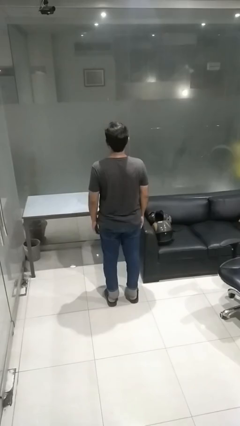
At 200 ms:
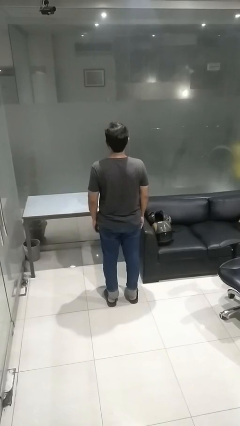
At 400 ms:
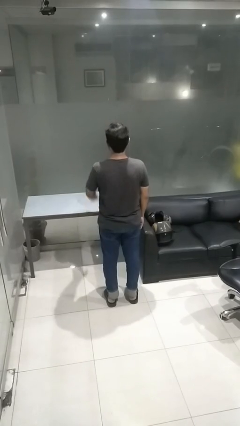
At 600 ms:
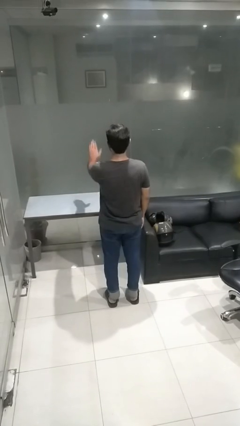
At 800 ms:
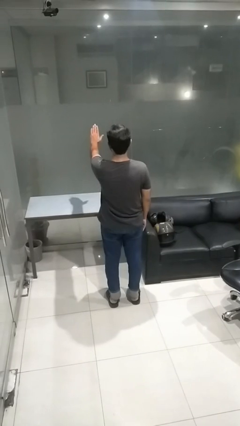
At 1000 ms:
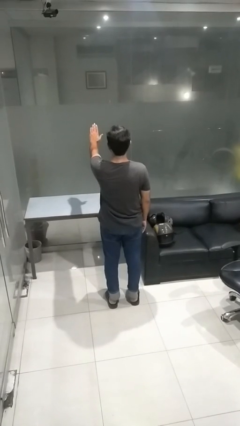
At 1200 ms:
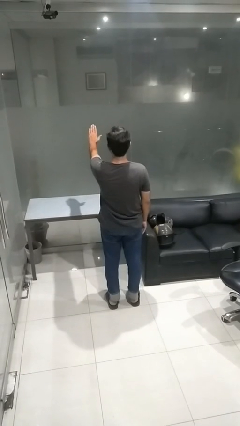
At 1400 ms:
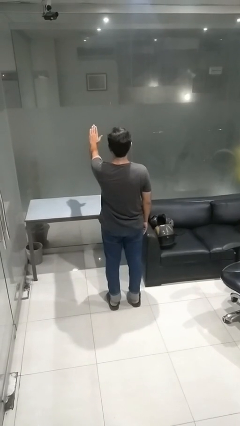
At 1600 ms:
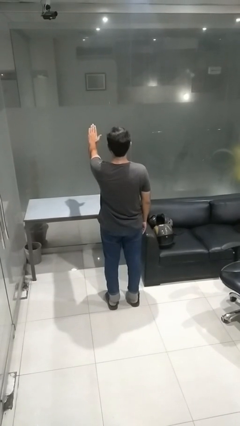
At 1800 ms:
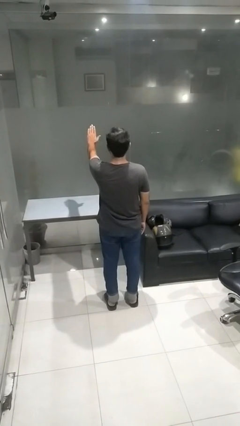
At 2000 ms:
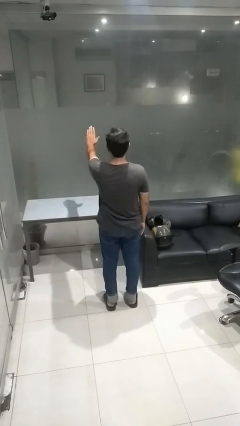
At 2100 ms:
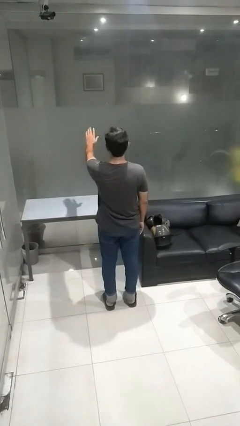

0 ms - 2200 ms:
person gestures stop

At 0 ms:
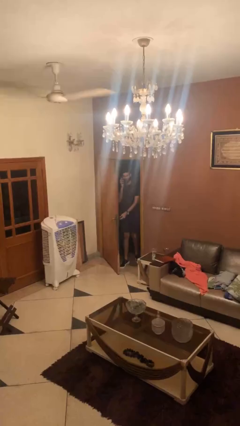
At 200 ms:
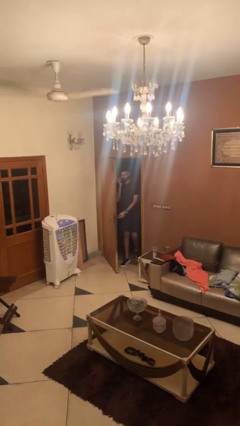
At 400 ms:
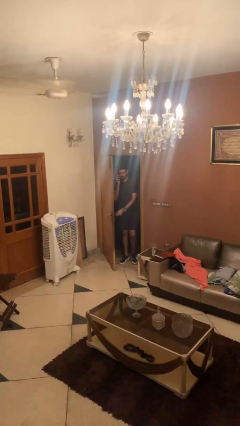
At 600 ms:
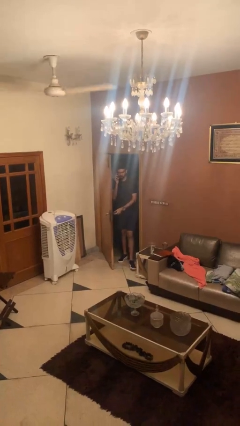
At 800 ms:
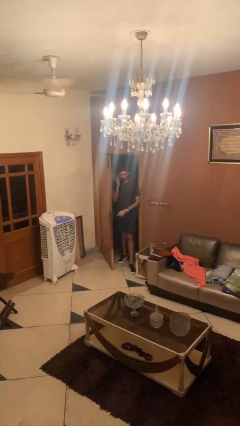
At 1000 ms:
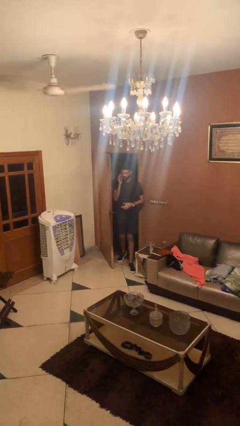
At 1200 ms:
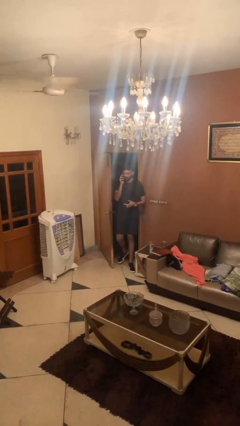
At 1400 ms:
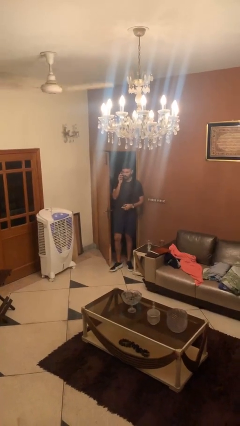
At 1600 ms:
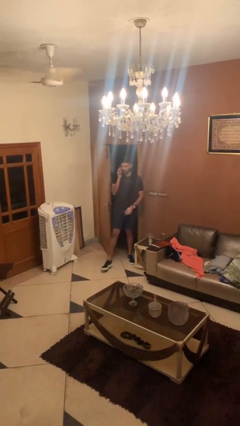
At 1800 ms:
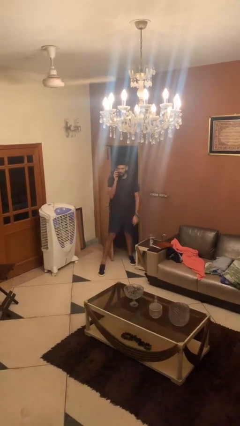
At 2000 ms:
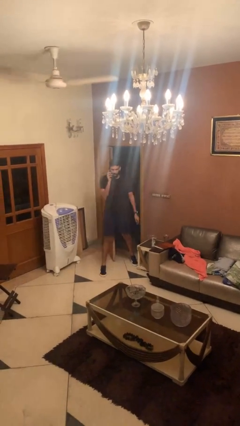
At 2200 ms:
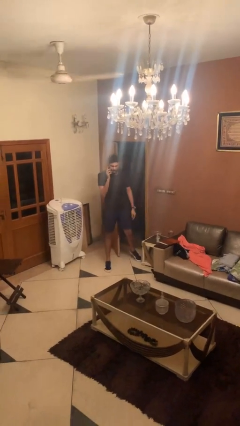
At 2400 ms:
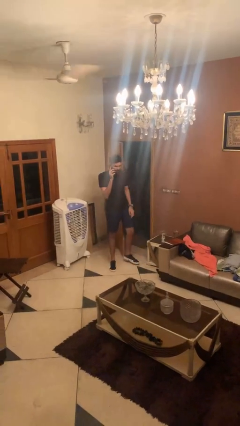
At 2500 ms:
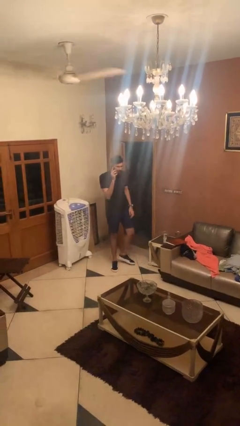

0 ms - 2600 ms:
person enters scene through structure

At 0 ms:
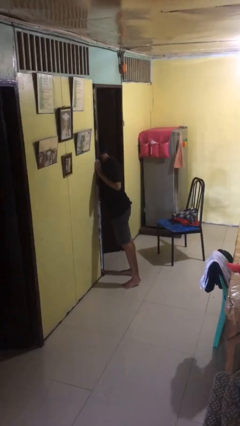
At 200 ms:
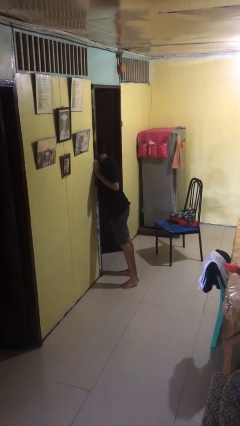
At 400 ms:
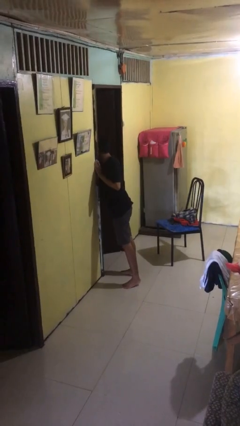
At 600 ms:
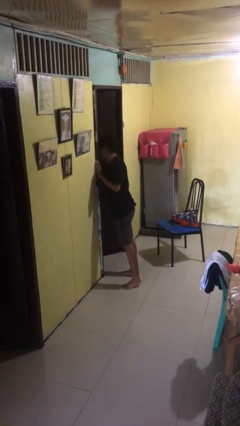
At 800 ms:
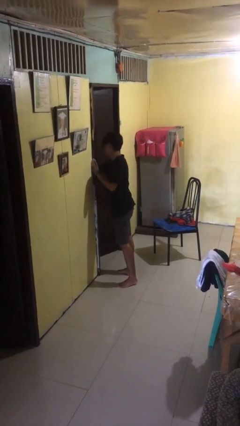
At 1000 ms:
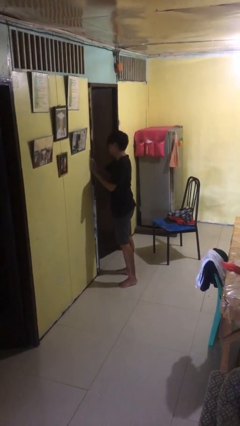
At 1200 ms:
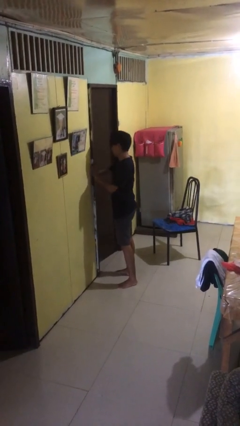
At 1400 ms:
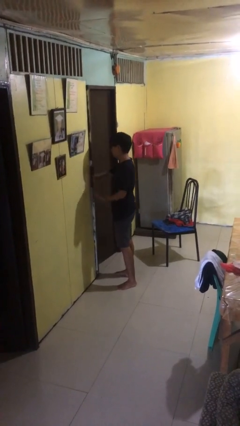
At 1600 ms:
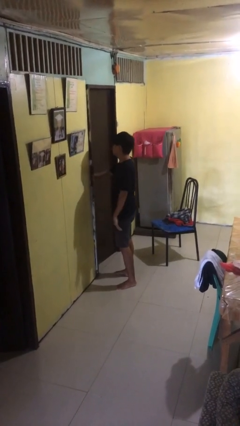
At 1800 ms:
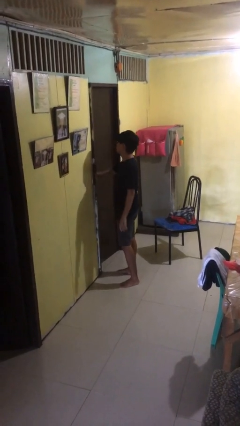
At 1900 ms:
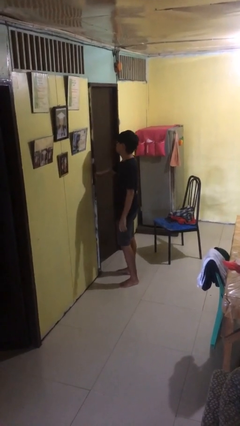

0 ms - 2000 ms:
person closes facility door

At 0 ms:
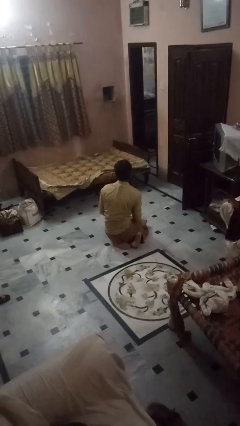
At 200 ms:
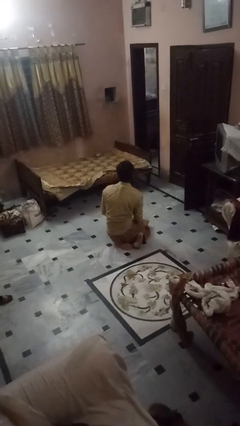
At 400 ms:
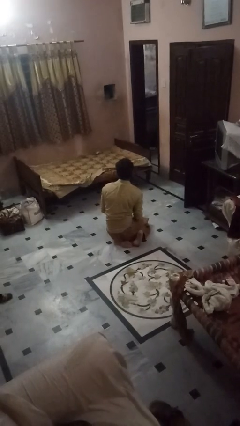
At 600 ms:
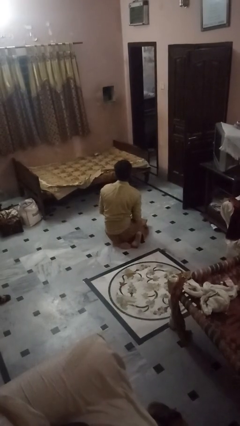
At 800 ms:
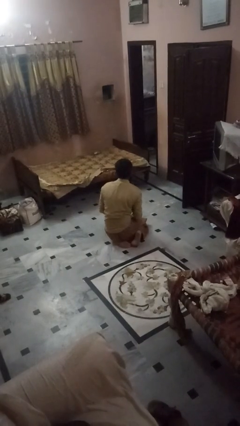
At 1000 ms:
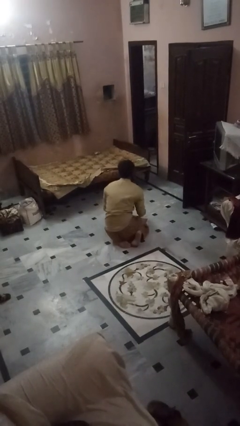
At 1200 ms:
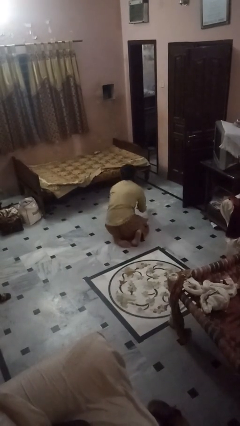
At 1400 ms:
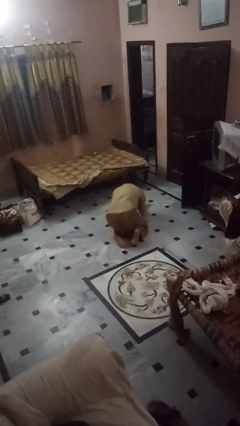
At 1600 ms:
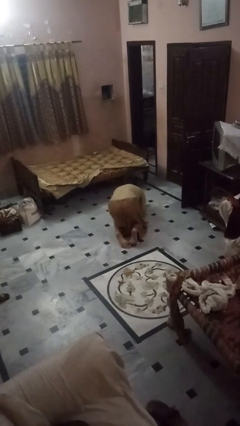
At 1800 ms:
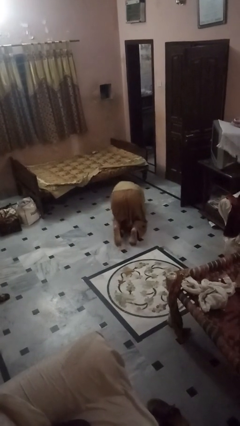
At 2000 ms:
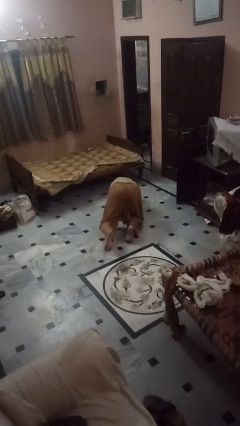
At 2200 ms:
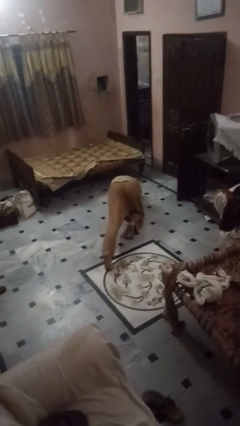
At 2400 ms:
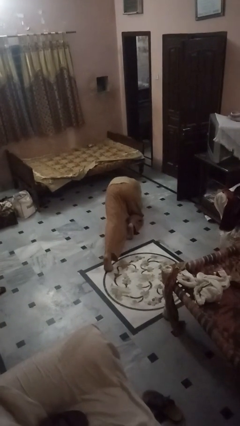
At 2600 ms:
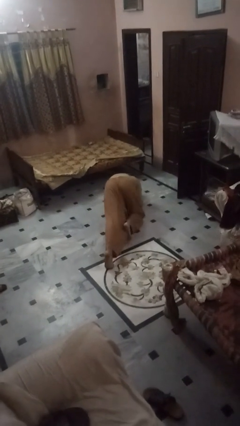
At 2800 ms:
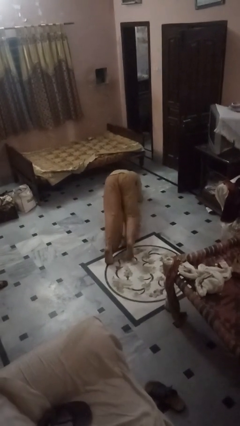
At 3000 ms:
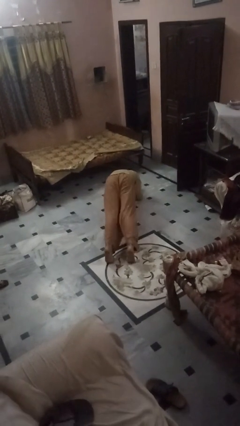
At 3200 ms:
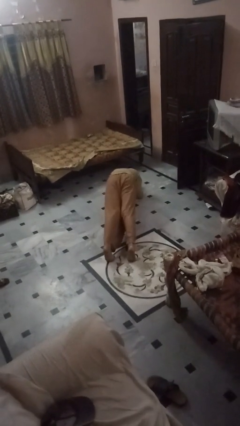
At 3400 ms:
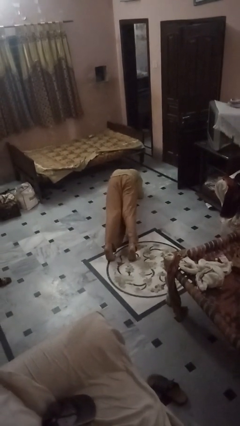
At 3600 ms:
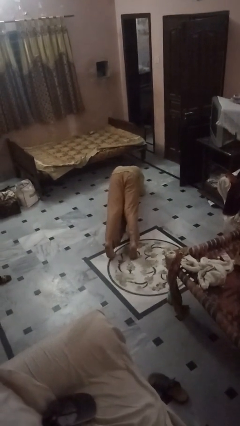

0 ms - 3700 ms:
person exercises with plank

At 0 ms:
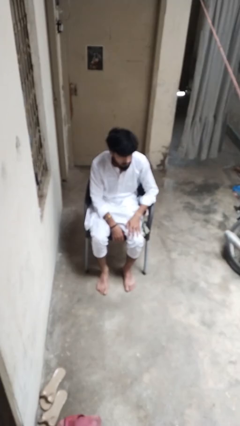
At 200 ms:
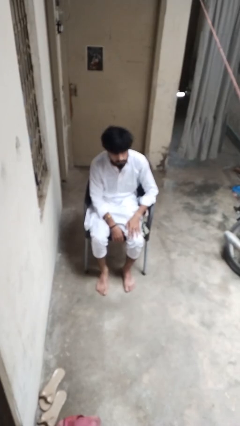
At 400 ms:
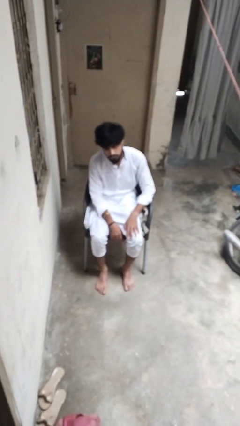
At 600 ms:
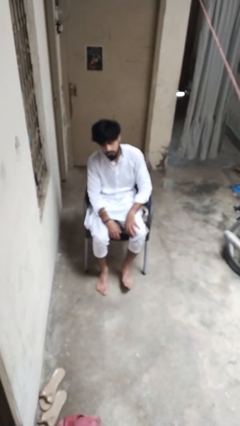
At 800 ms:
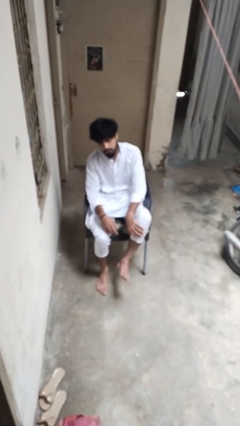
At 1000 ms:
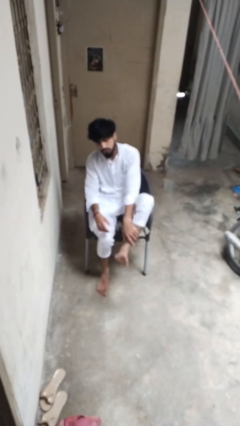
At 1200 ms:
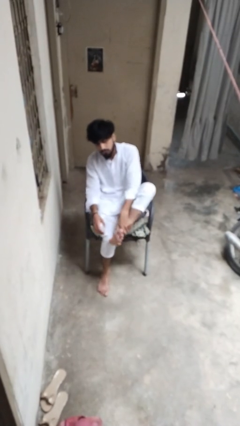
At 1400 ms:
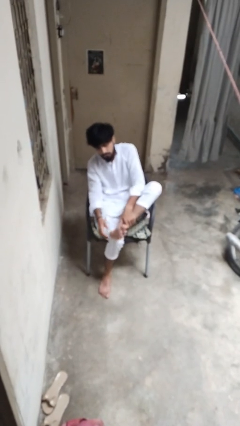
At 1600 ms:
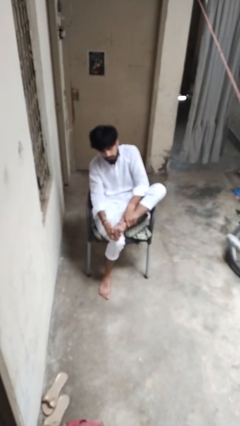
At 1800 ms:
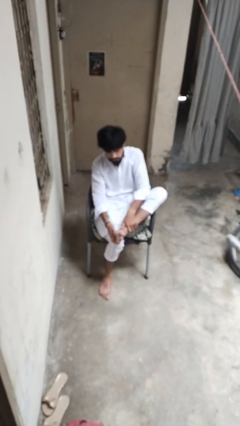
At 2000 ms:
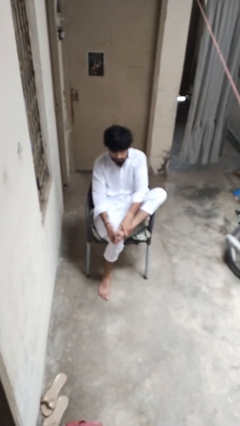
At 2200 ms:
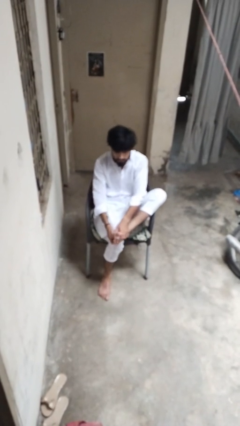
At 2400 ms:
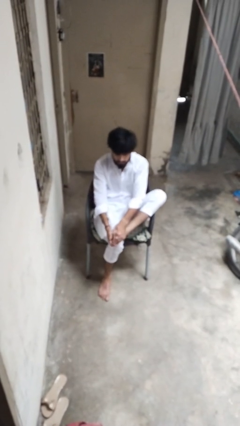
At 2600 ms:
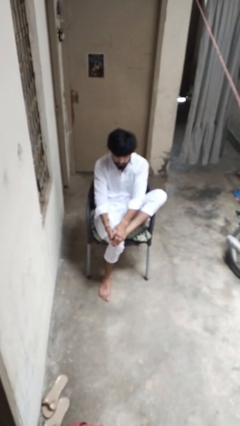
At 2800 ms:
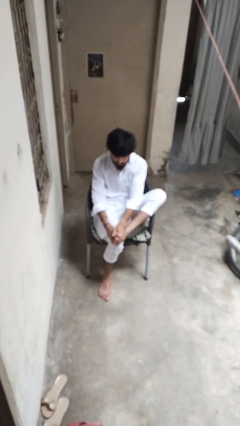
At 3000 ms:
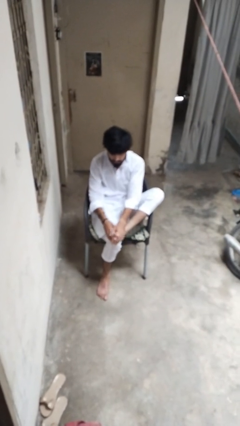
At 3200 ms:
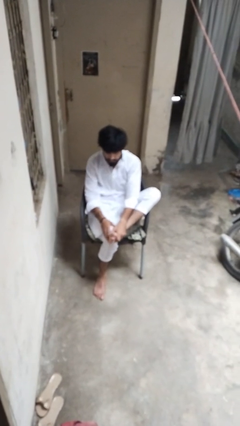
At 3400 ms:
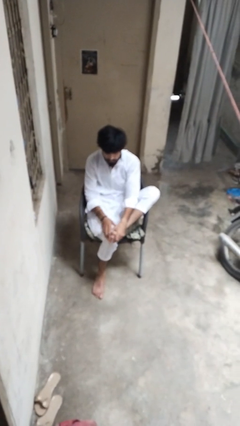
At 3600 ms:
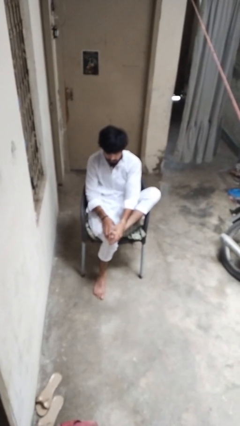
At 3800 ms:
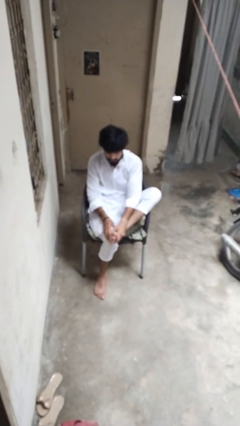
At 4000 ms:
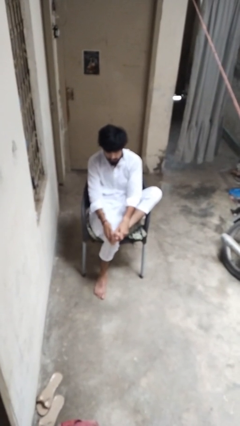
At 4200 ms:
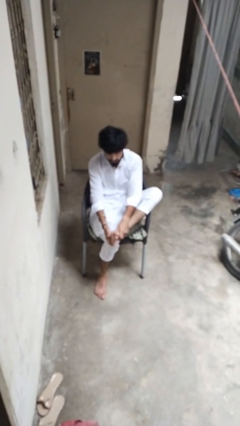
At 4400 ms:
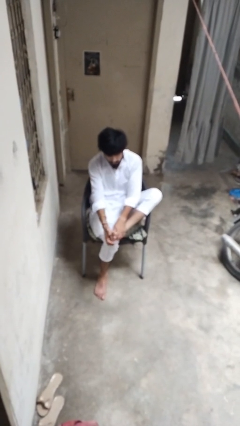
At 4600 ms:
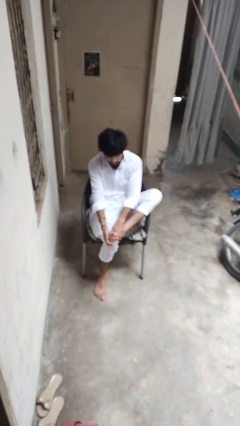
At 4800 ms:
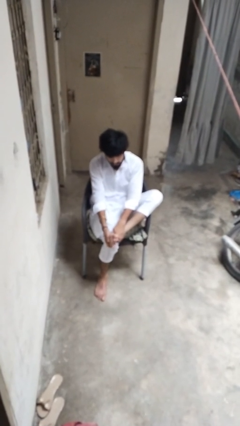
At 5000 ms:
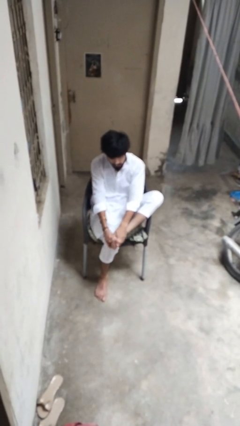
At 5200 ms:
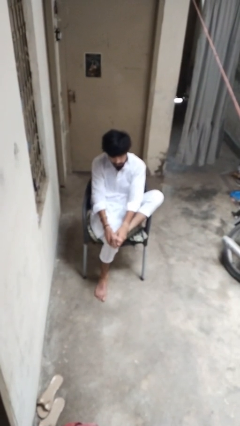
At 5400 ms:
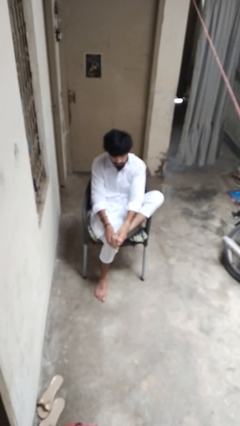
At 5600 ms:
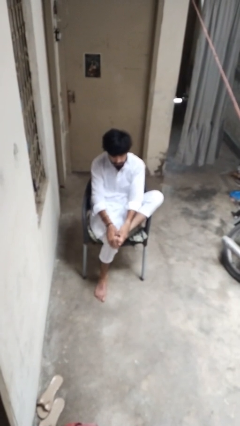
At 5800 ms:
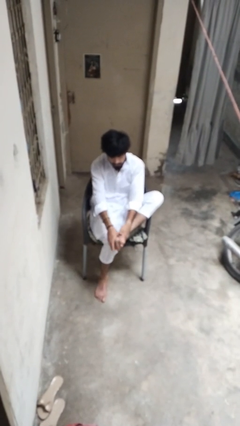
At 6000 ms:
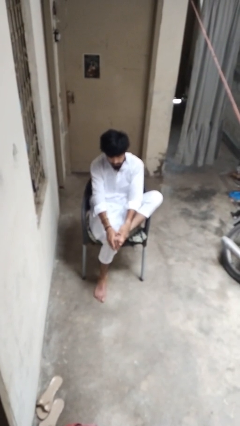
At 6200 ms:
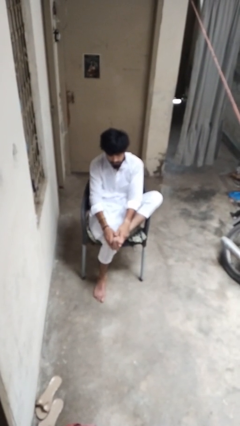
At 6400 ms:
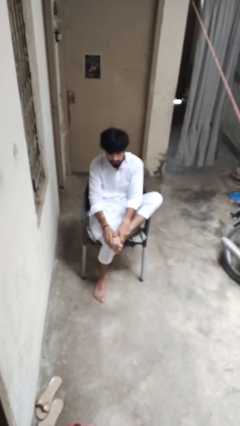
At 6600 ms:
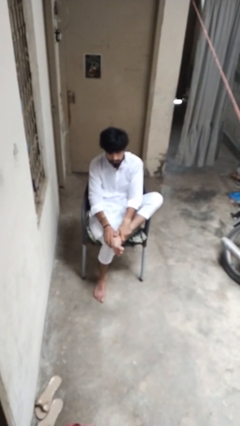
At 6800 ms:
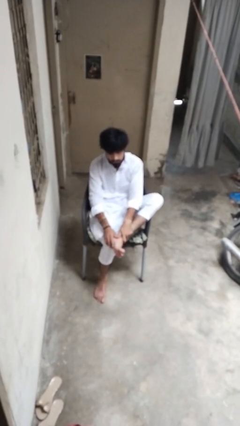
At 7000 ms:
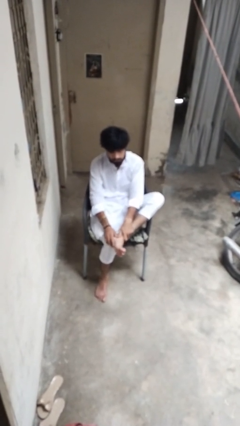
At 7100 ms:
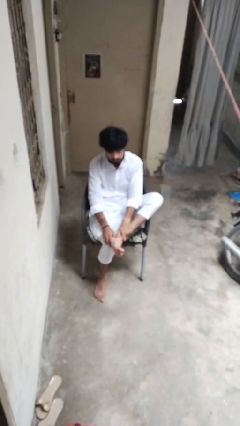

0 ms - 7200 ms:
person rubs foot
